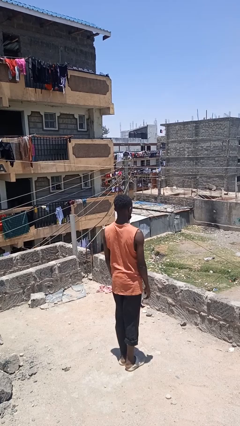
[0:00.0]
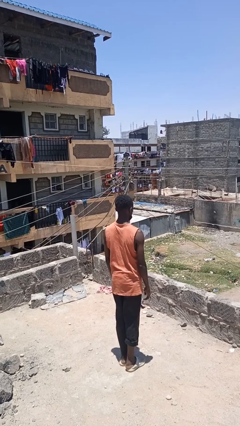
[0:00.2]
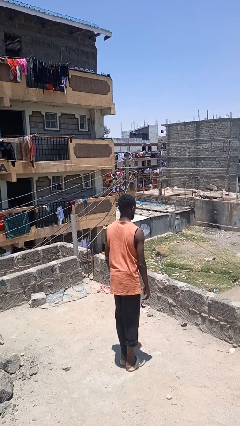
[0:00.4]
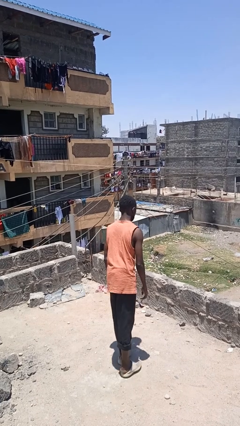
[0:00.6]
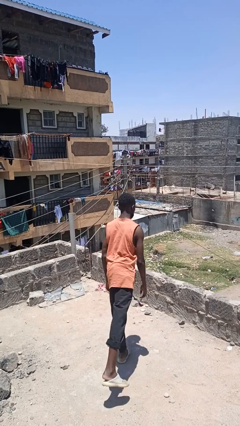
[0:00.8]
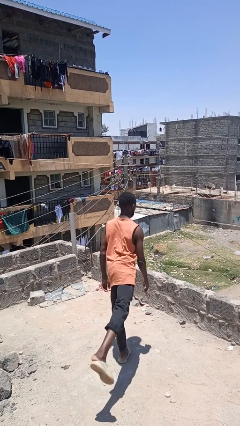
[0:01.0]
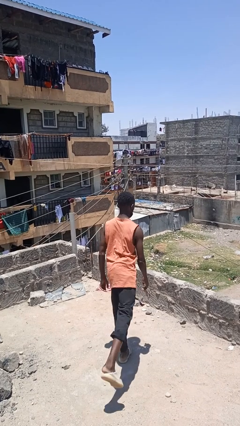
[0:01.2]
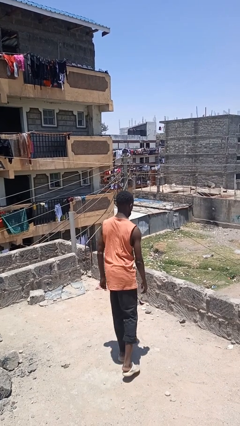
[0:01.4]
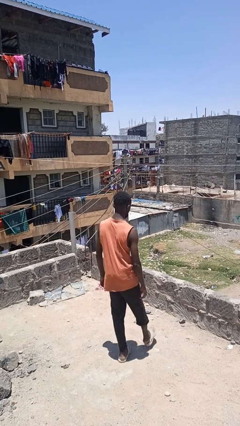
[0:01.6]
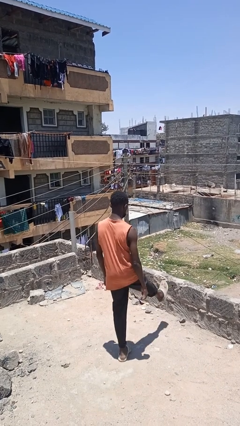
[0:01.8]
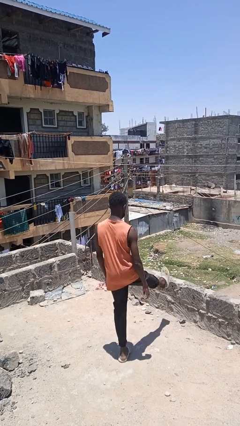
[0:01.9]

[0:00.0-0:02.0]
person wiggles hips

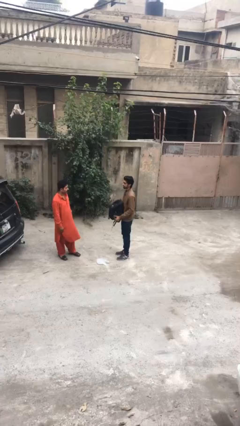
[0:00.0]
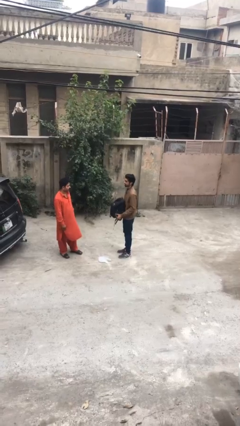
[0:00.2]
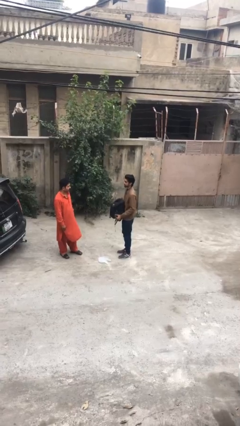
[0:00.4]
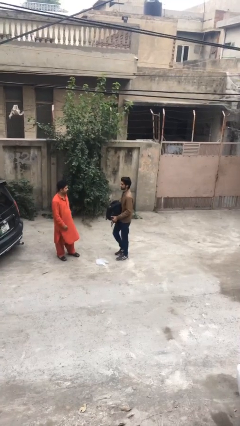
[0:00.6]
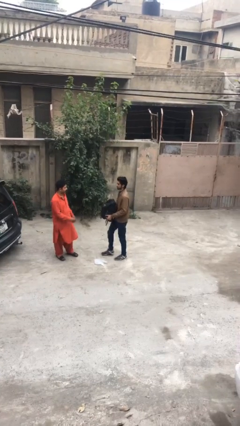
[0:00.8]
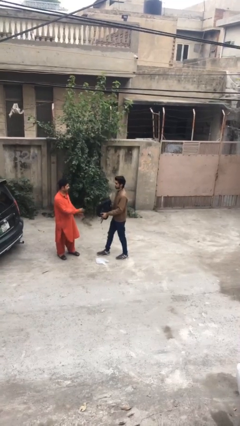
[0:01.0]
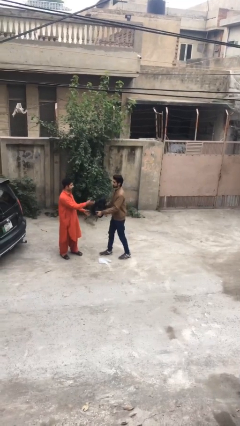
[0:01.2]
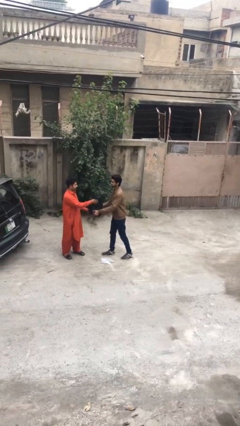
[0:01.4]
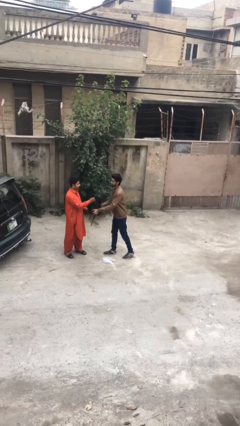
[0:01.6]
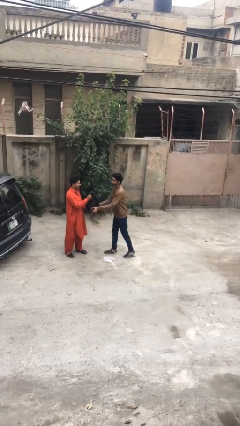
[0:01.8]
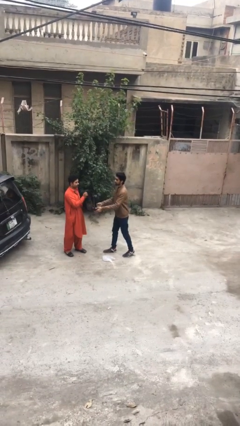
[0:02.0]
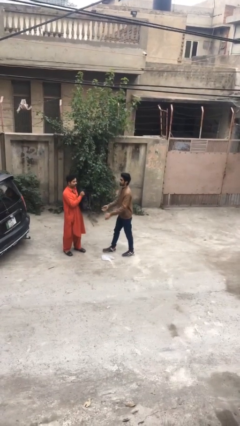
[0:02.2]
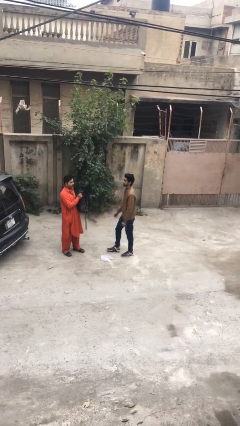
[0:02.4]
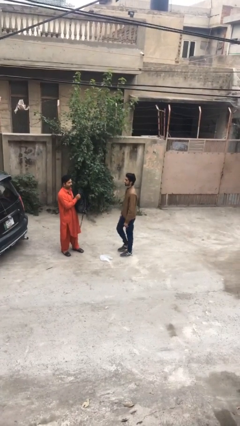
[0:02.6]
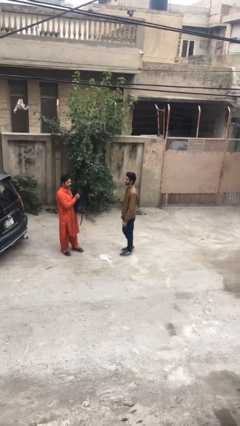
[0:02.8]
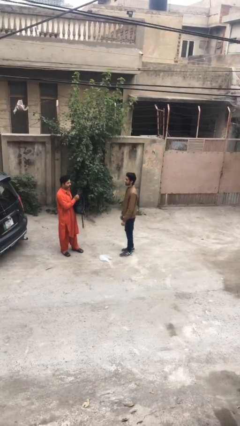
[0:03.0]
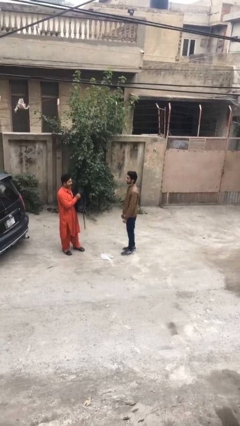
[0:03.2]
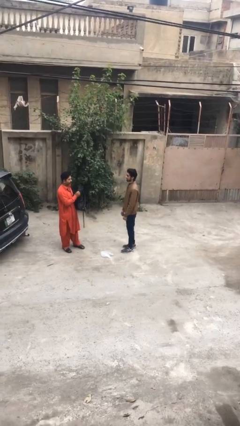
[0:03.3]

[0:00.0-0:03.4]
person transfers object to person

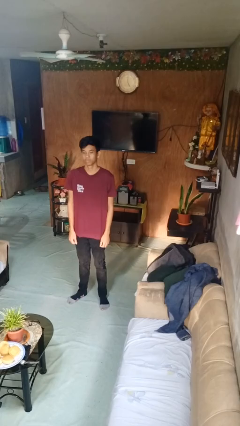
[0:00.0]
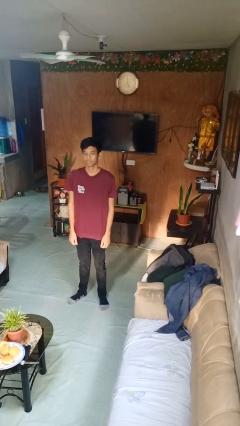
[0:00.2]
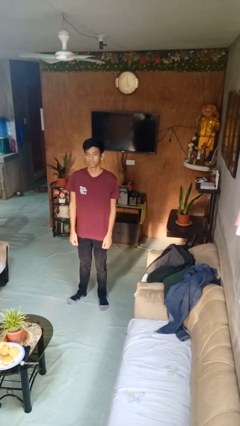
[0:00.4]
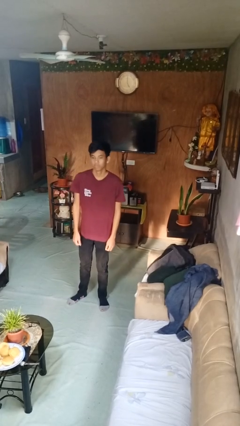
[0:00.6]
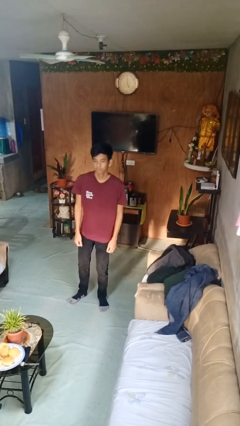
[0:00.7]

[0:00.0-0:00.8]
person stands up from floor

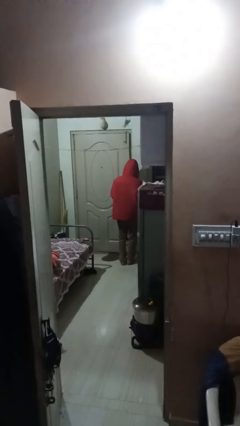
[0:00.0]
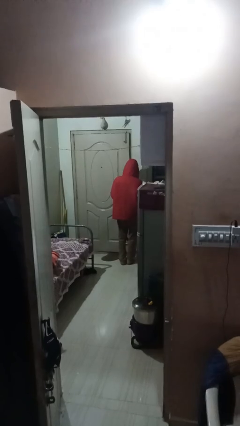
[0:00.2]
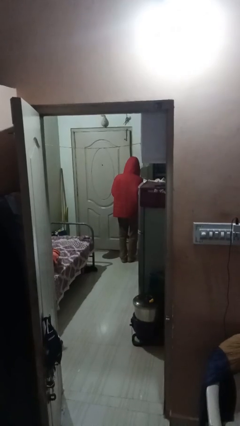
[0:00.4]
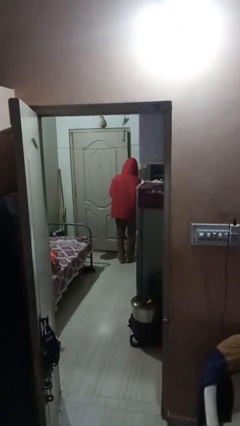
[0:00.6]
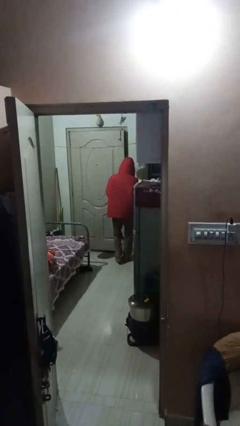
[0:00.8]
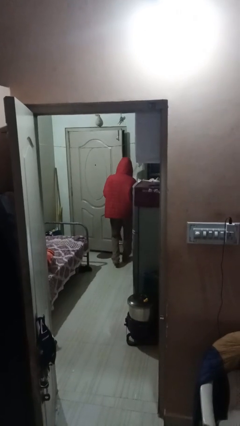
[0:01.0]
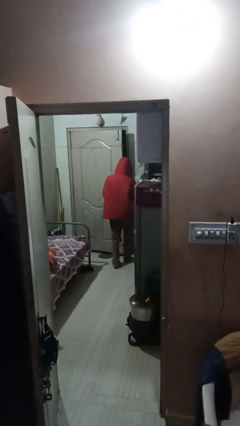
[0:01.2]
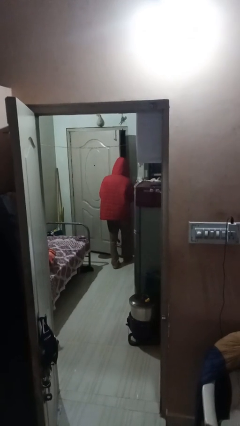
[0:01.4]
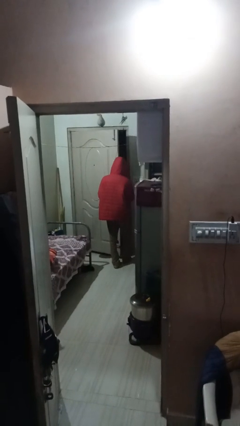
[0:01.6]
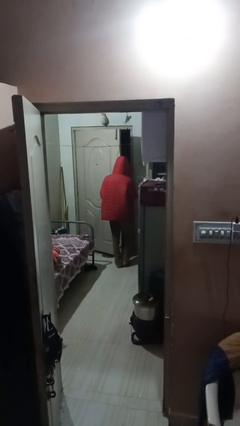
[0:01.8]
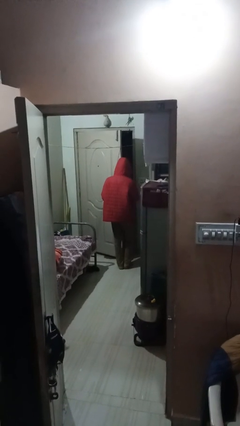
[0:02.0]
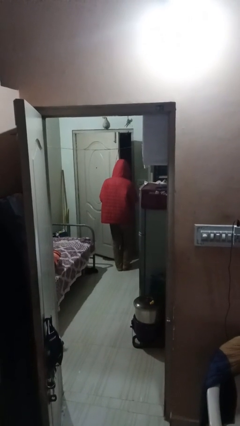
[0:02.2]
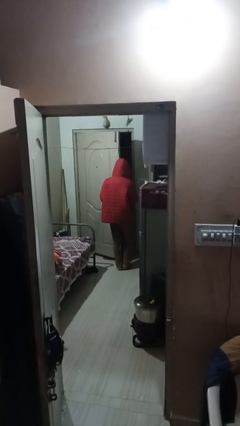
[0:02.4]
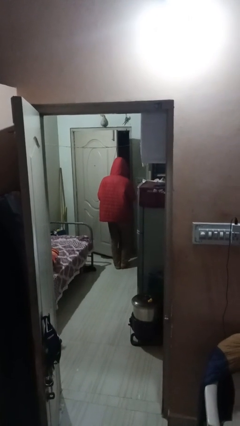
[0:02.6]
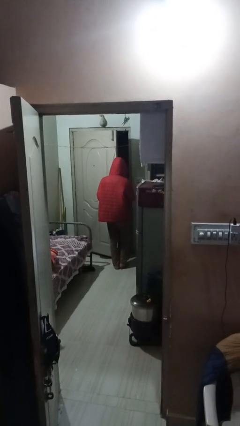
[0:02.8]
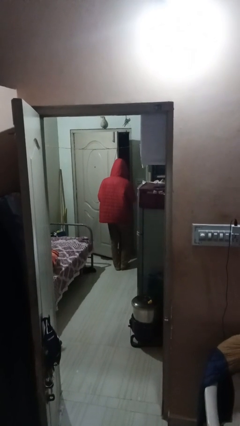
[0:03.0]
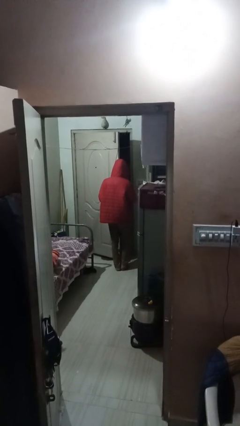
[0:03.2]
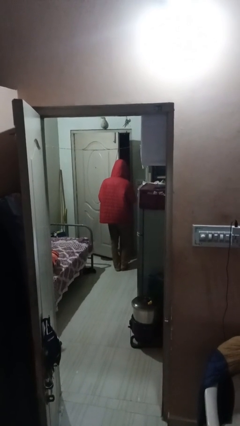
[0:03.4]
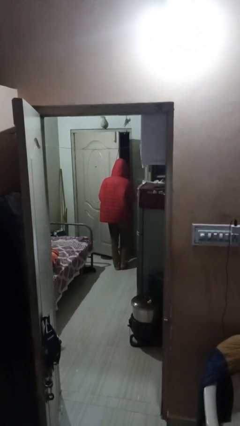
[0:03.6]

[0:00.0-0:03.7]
person opens facility door

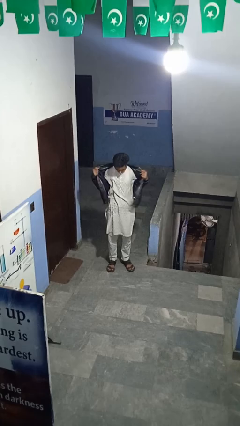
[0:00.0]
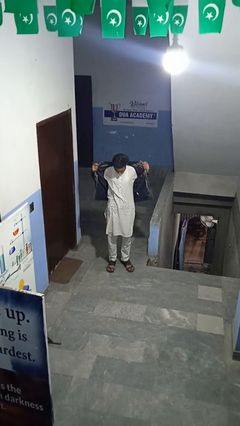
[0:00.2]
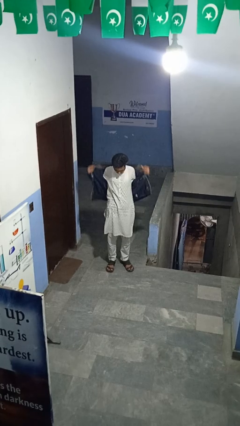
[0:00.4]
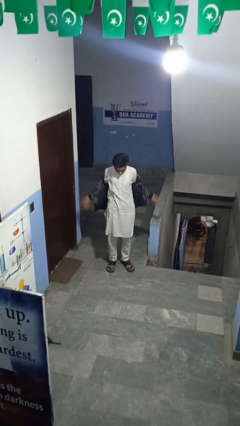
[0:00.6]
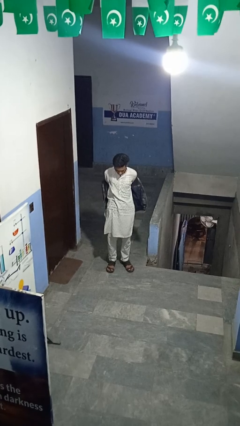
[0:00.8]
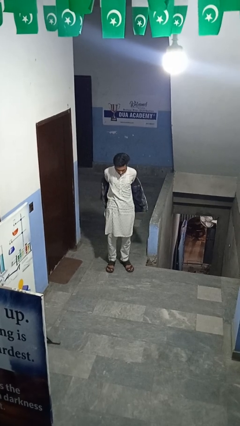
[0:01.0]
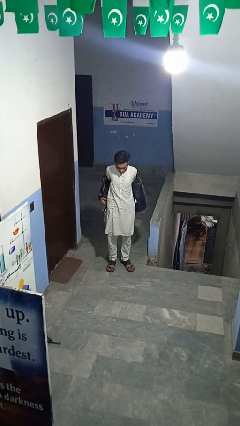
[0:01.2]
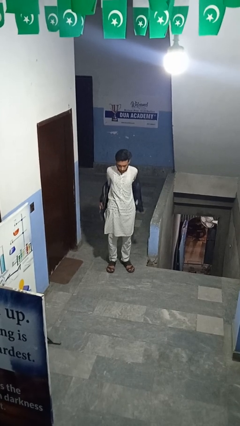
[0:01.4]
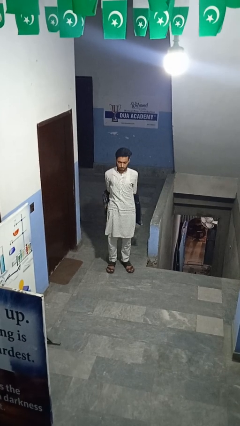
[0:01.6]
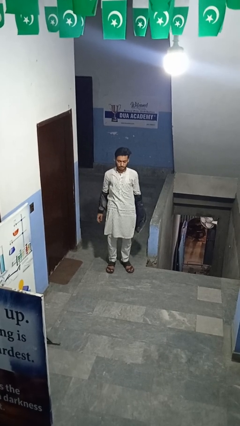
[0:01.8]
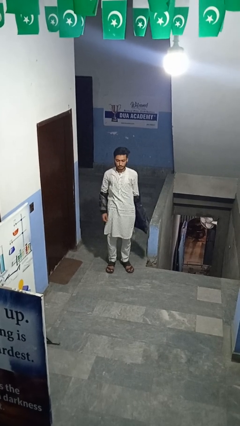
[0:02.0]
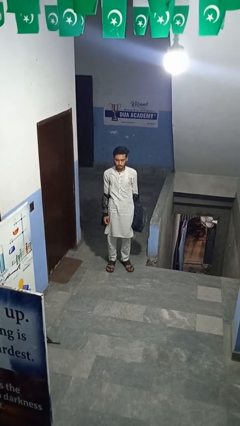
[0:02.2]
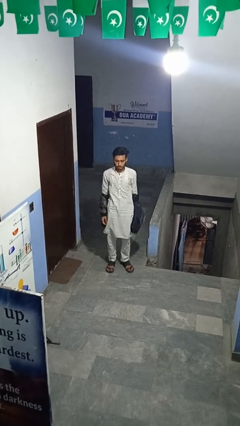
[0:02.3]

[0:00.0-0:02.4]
person takes off jacket

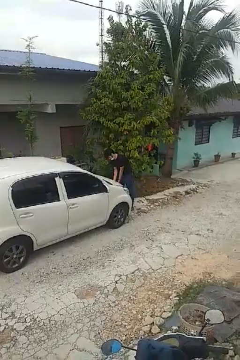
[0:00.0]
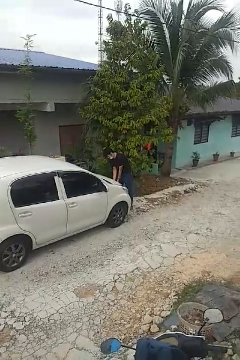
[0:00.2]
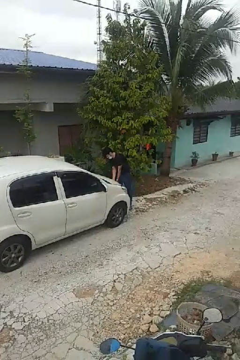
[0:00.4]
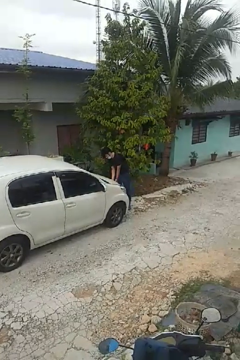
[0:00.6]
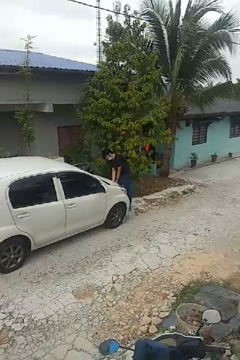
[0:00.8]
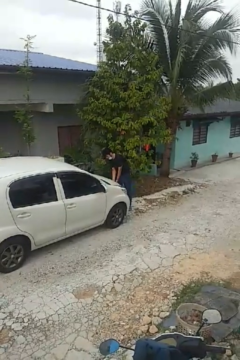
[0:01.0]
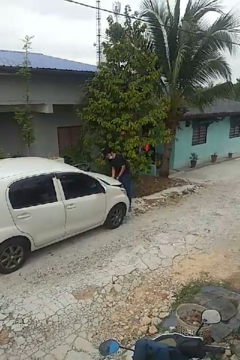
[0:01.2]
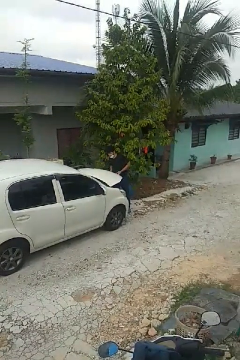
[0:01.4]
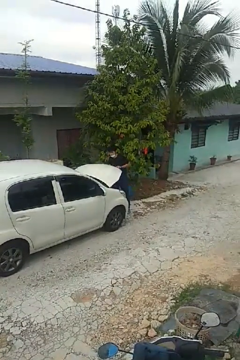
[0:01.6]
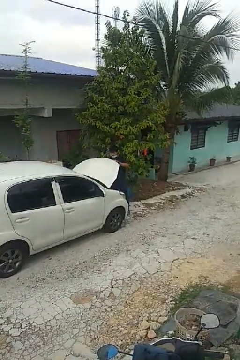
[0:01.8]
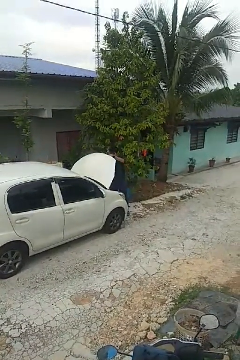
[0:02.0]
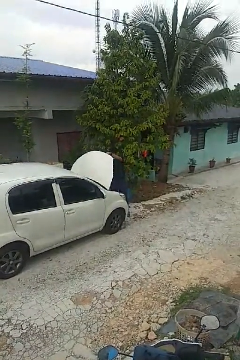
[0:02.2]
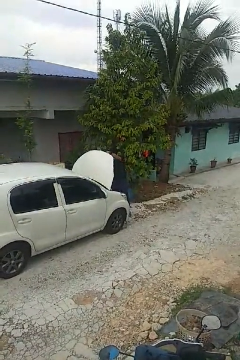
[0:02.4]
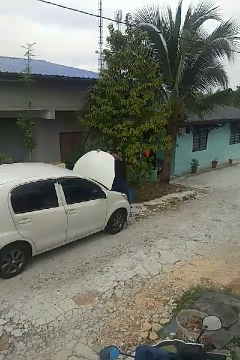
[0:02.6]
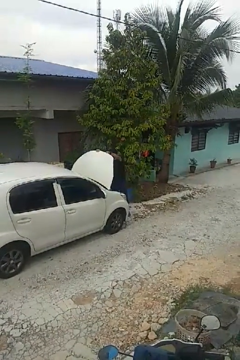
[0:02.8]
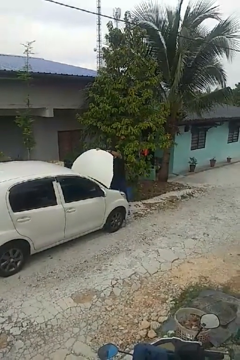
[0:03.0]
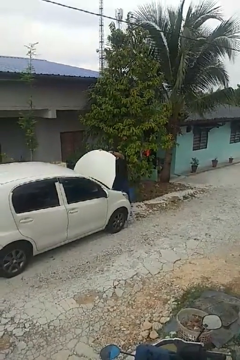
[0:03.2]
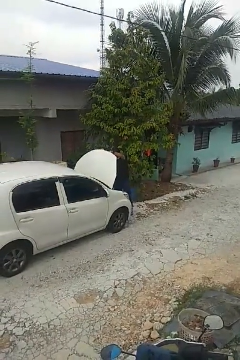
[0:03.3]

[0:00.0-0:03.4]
person opens car hood

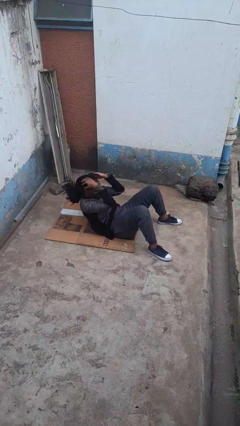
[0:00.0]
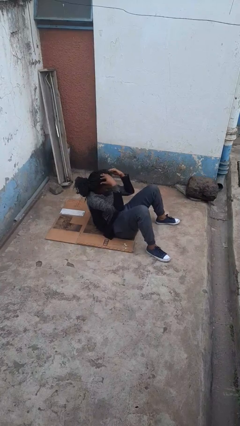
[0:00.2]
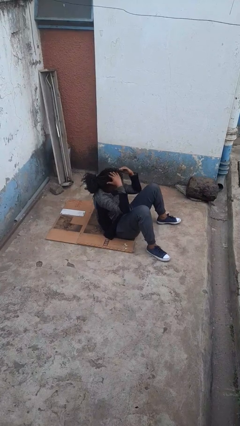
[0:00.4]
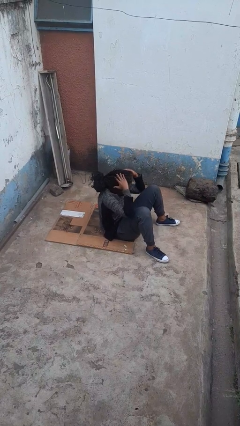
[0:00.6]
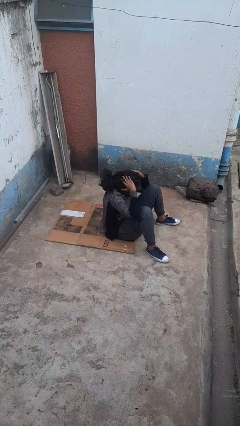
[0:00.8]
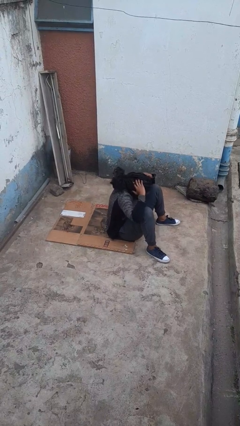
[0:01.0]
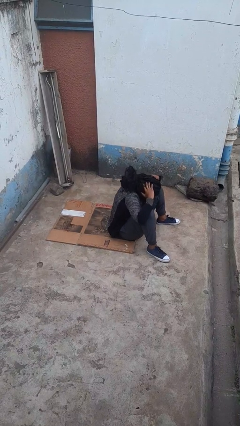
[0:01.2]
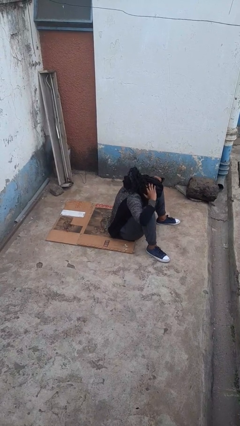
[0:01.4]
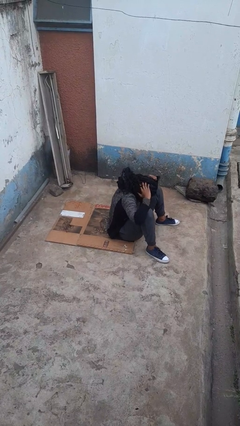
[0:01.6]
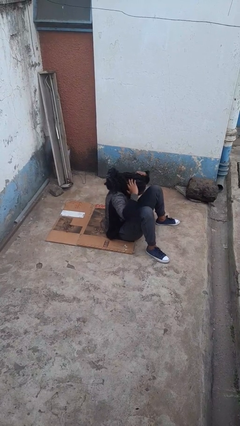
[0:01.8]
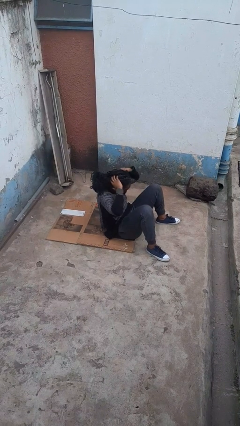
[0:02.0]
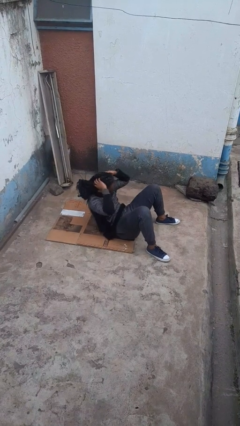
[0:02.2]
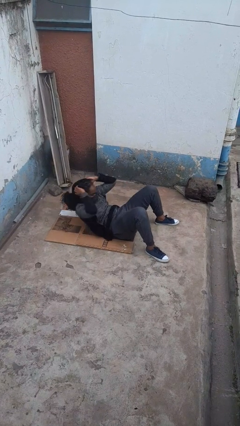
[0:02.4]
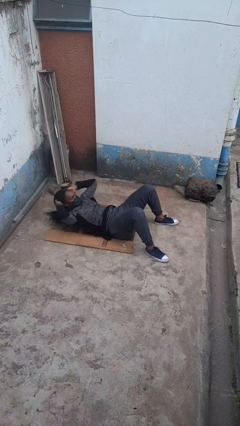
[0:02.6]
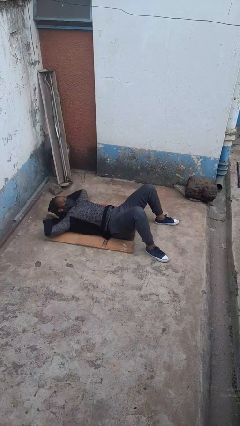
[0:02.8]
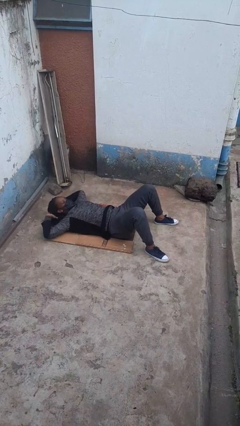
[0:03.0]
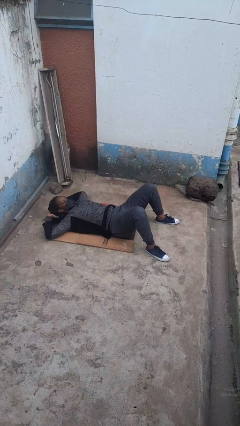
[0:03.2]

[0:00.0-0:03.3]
person exercises with situp
